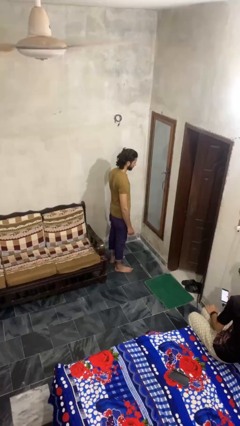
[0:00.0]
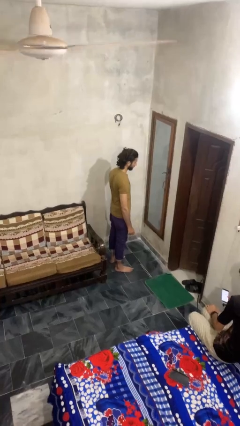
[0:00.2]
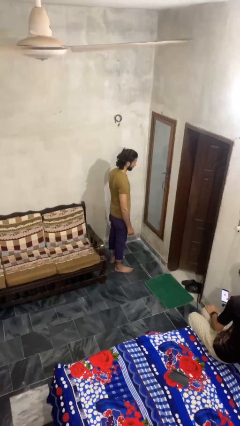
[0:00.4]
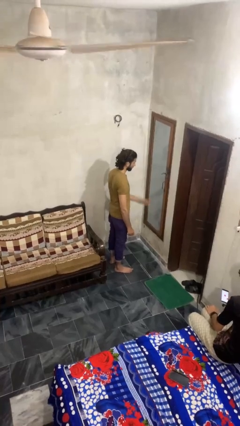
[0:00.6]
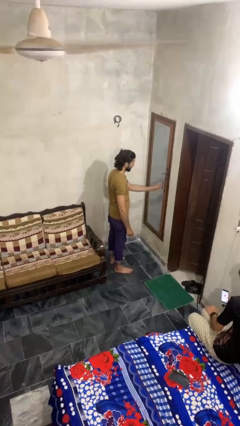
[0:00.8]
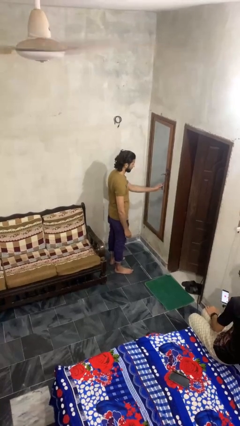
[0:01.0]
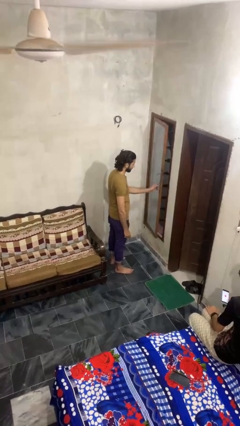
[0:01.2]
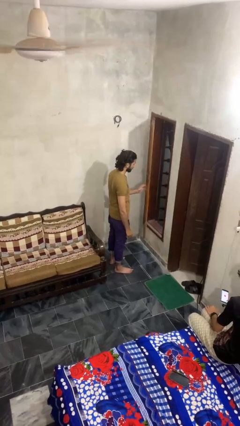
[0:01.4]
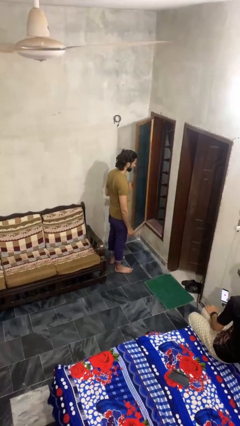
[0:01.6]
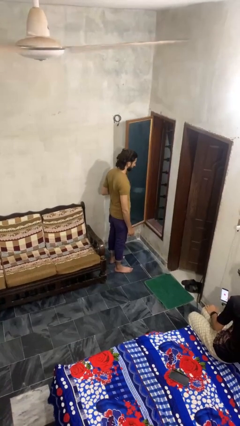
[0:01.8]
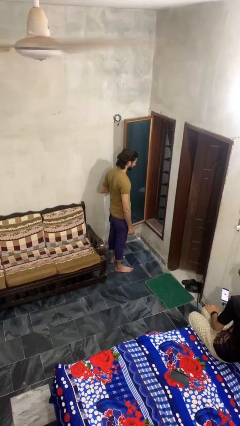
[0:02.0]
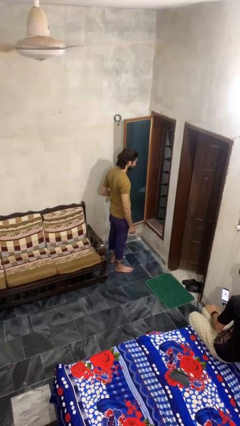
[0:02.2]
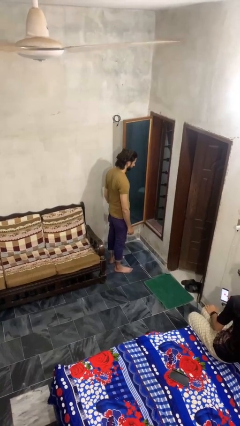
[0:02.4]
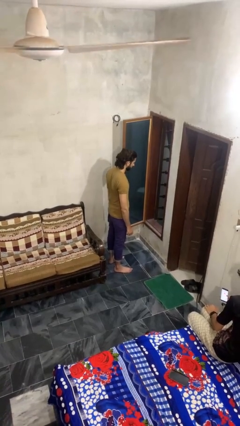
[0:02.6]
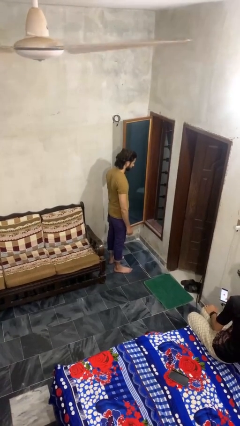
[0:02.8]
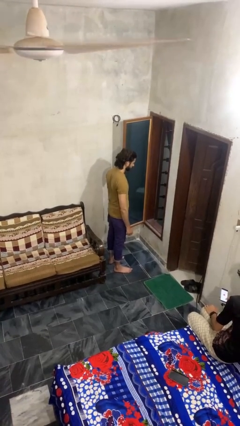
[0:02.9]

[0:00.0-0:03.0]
person opens home window

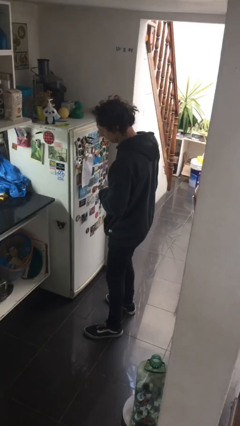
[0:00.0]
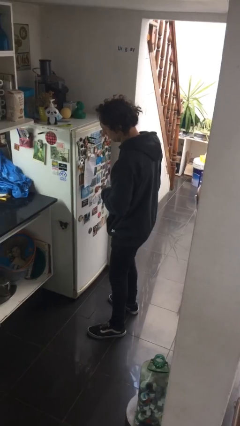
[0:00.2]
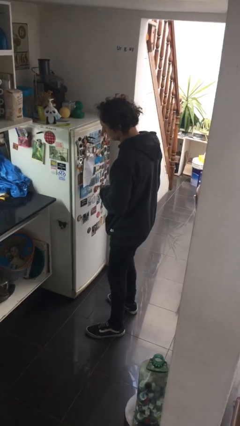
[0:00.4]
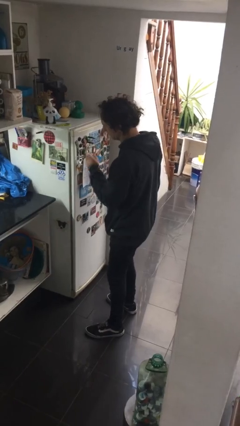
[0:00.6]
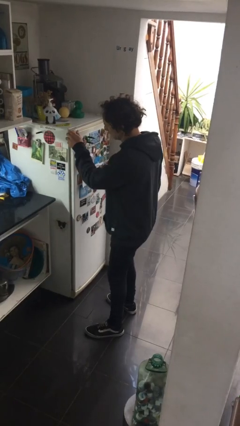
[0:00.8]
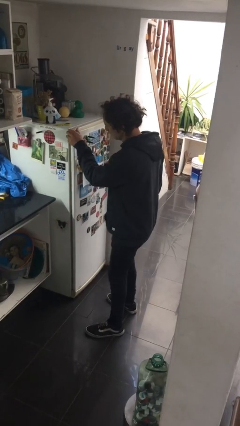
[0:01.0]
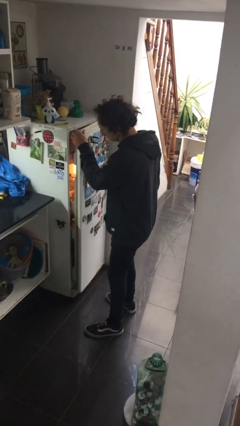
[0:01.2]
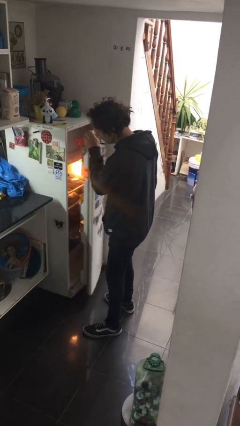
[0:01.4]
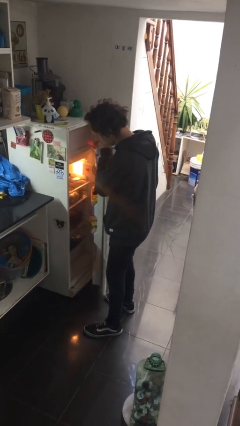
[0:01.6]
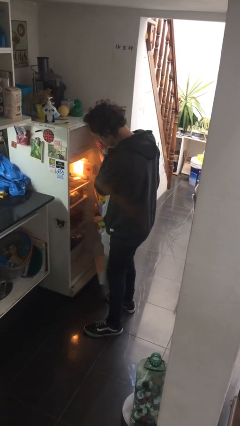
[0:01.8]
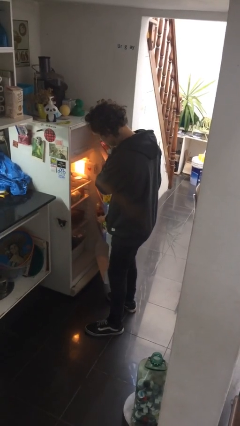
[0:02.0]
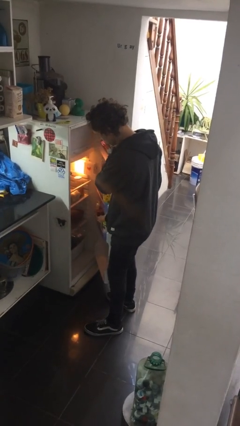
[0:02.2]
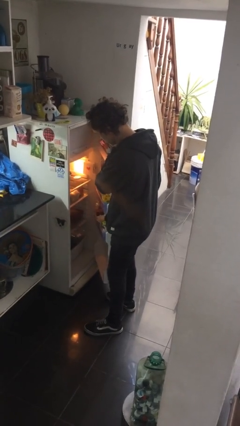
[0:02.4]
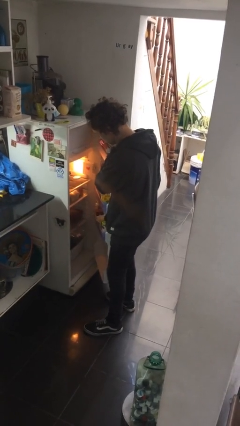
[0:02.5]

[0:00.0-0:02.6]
person opens refrigerator

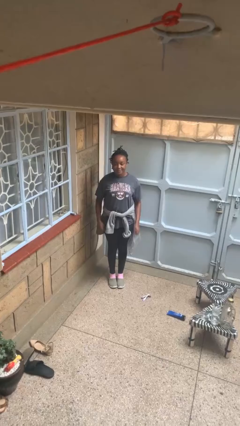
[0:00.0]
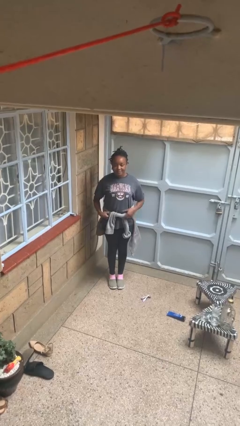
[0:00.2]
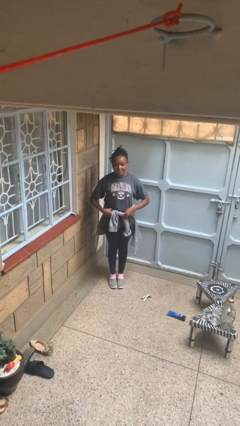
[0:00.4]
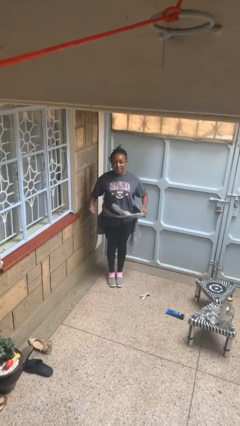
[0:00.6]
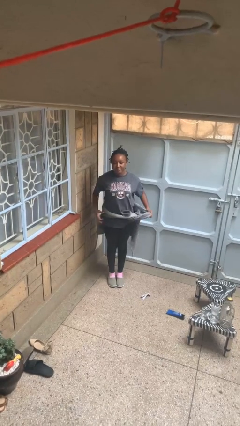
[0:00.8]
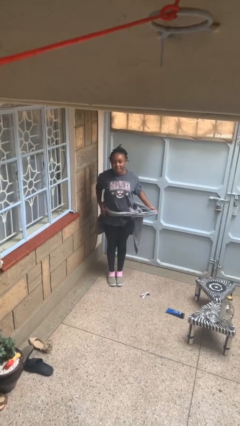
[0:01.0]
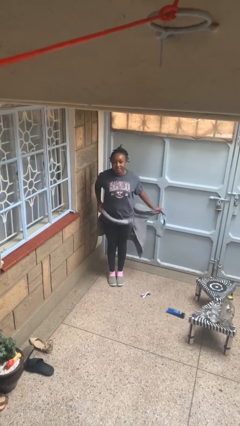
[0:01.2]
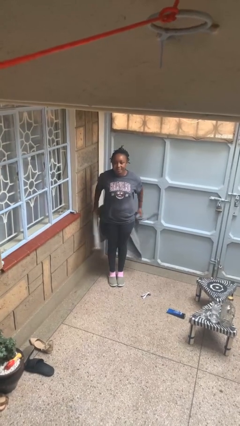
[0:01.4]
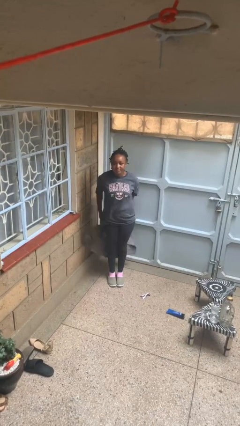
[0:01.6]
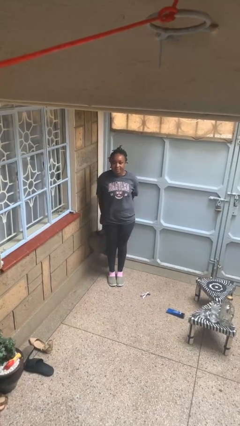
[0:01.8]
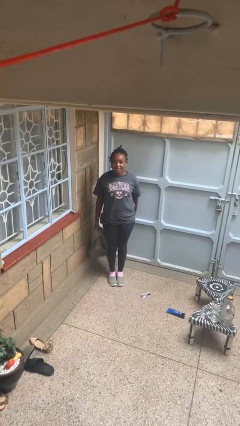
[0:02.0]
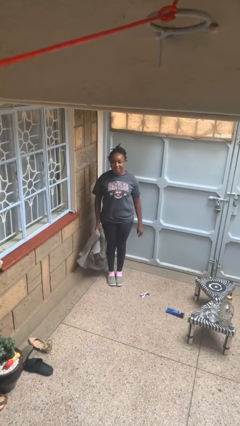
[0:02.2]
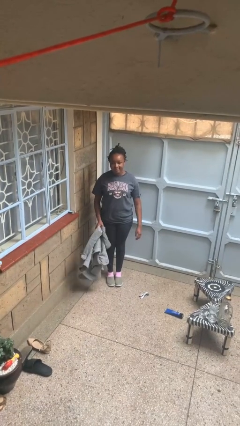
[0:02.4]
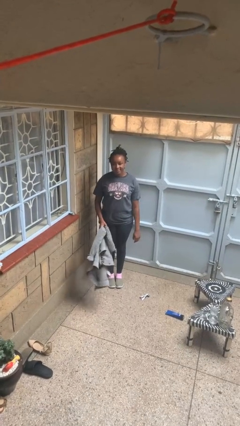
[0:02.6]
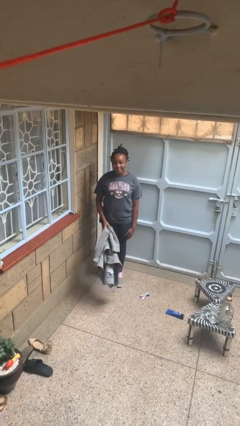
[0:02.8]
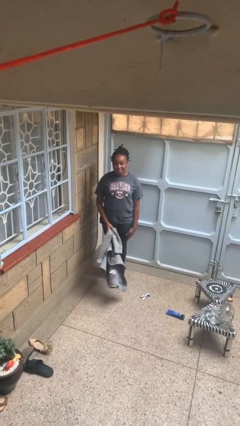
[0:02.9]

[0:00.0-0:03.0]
person unties jacket around waist

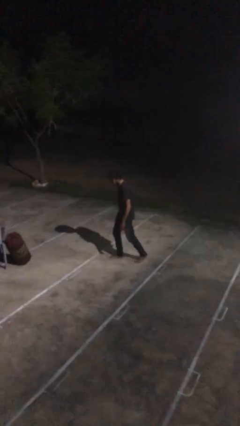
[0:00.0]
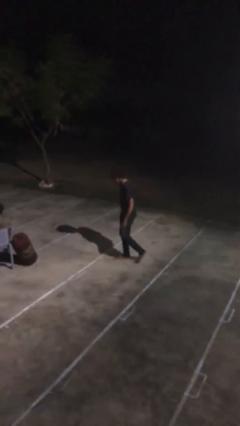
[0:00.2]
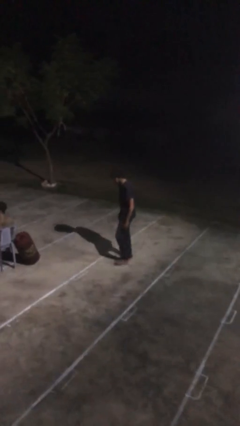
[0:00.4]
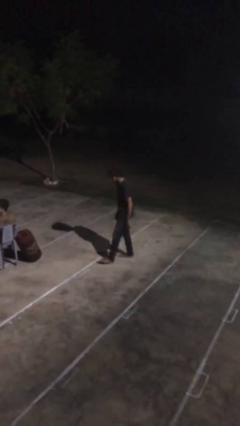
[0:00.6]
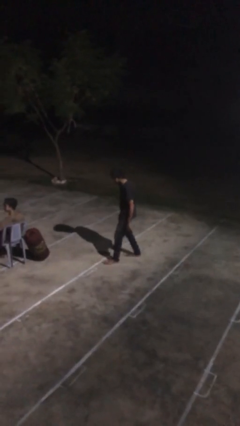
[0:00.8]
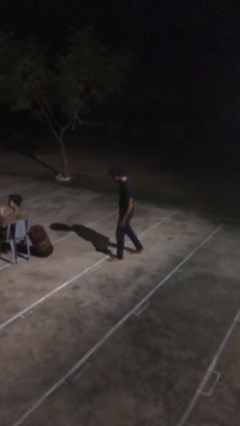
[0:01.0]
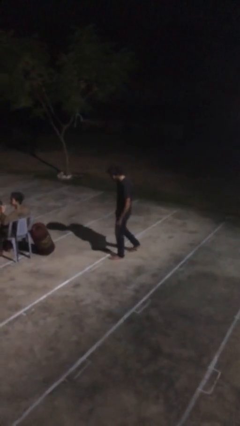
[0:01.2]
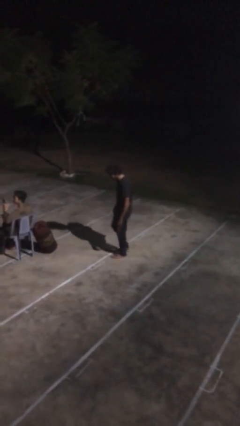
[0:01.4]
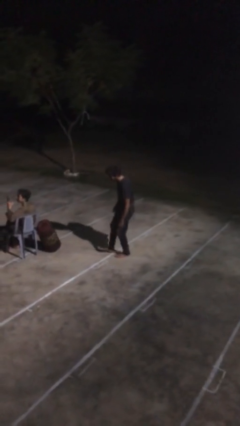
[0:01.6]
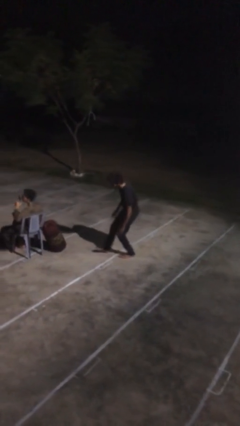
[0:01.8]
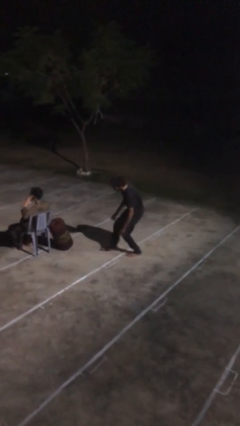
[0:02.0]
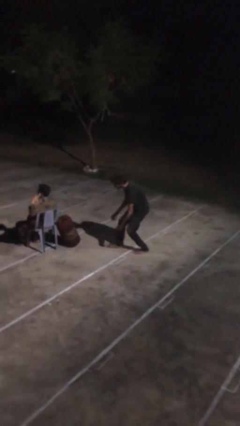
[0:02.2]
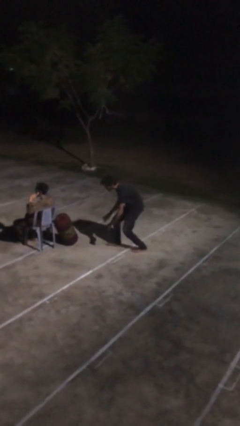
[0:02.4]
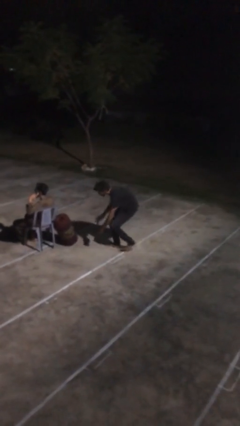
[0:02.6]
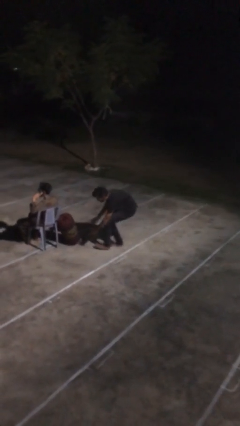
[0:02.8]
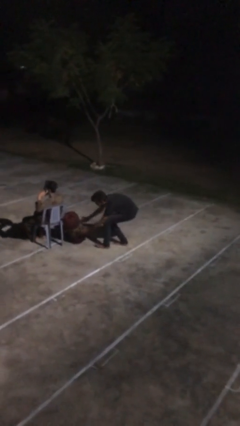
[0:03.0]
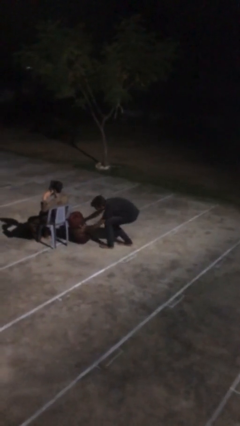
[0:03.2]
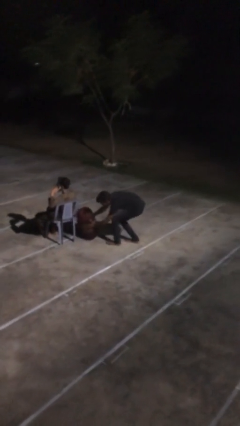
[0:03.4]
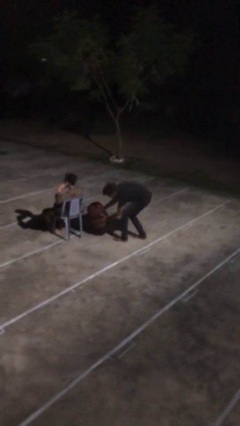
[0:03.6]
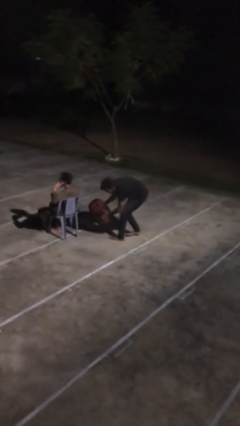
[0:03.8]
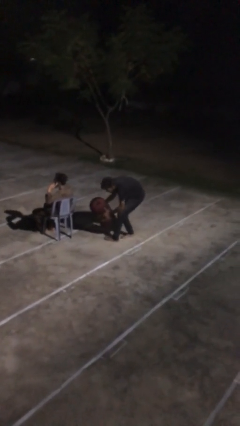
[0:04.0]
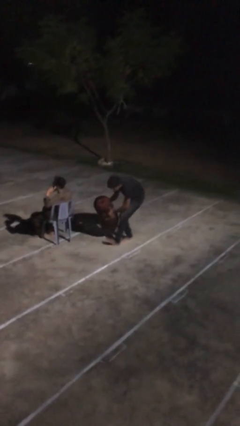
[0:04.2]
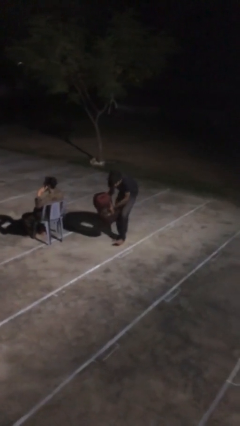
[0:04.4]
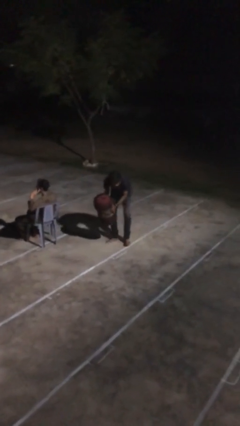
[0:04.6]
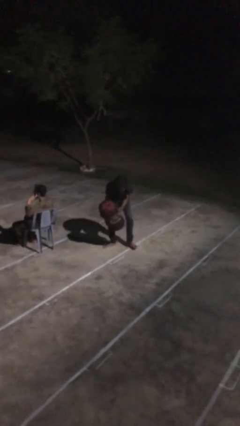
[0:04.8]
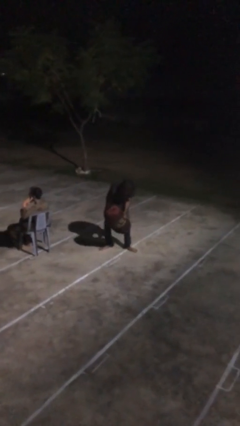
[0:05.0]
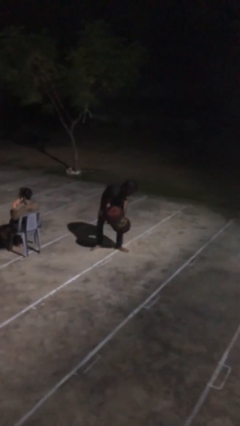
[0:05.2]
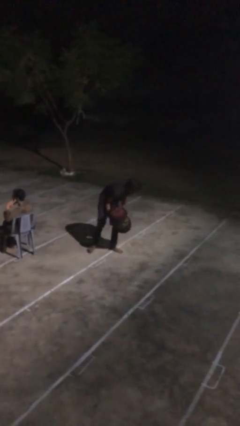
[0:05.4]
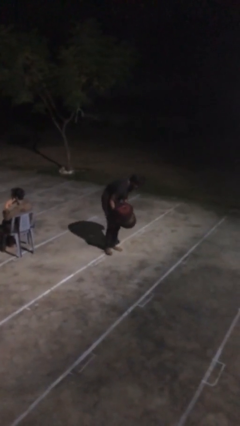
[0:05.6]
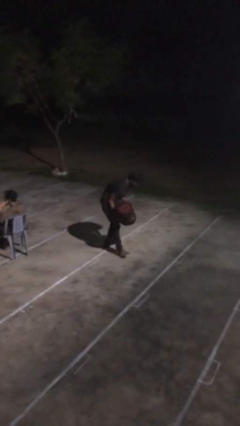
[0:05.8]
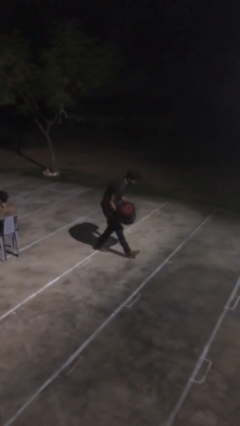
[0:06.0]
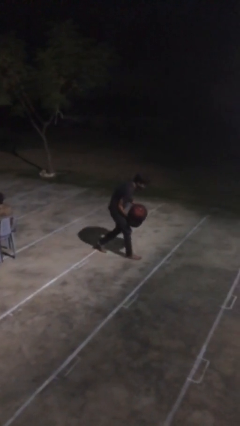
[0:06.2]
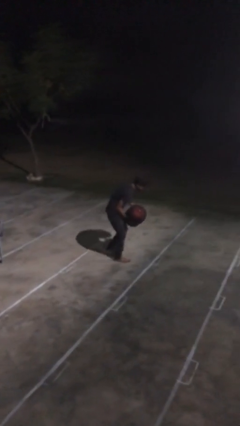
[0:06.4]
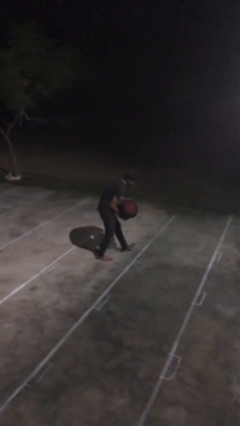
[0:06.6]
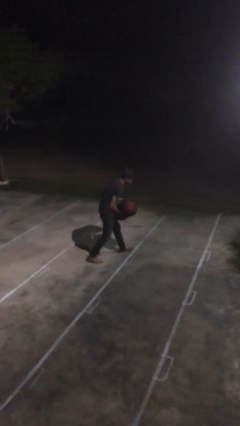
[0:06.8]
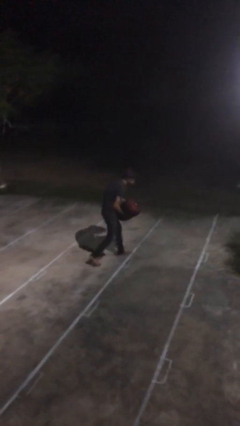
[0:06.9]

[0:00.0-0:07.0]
person steals object from person

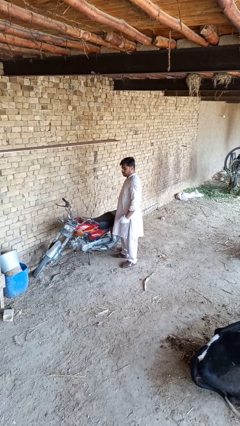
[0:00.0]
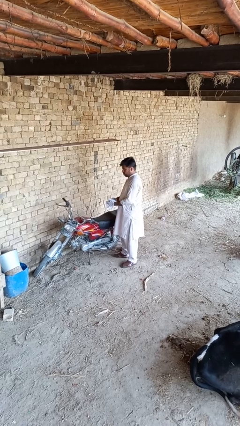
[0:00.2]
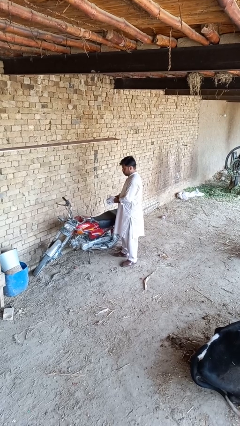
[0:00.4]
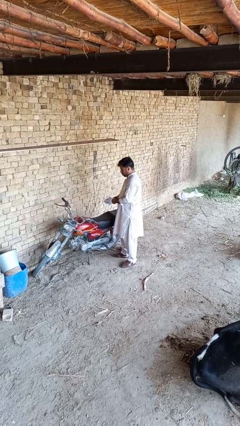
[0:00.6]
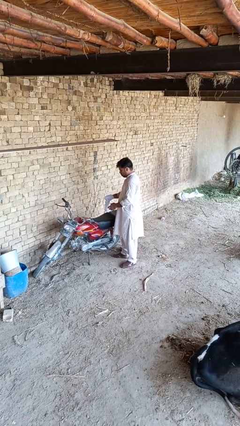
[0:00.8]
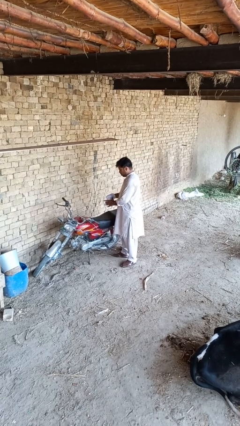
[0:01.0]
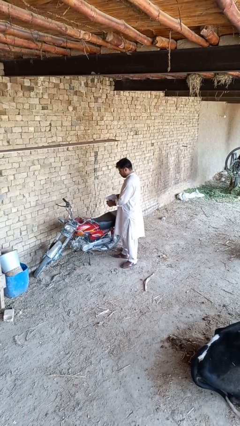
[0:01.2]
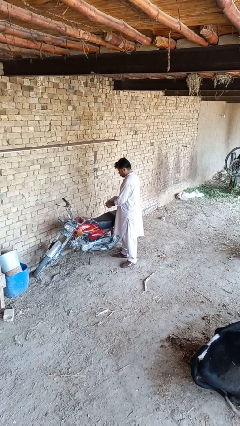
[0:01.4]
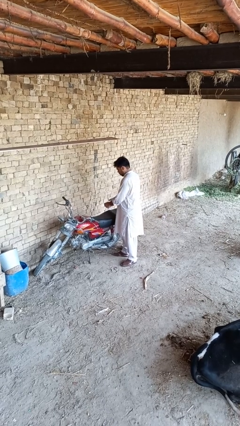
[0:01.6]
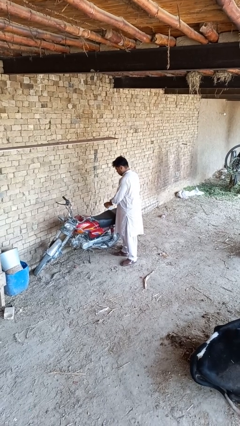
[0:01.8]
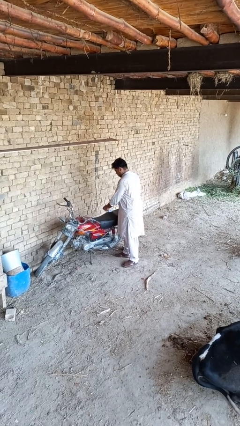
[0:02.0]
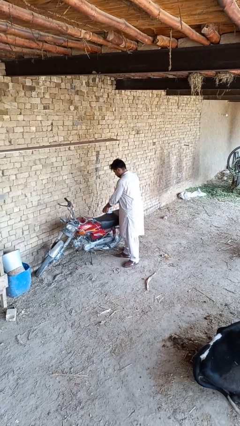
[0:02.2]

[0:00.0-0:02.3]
person takes off gloves

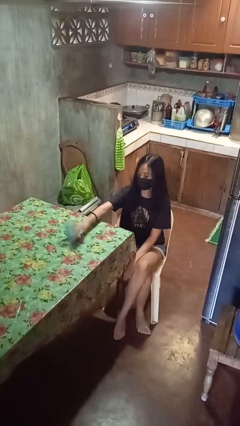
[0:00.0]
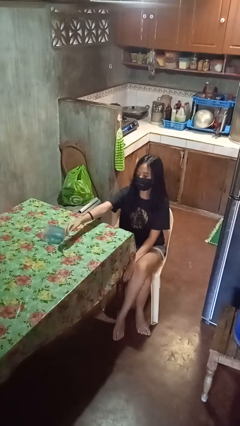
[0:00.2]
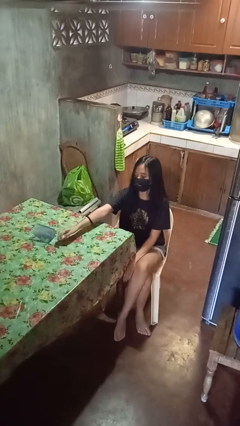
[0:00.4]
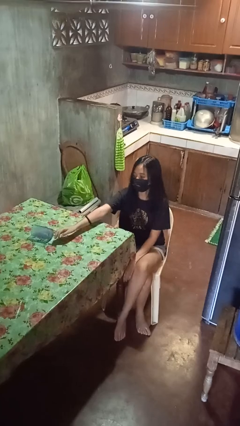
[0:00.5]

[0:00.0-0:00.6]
person knocks over glass
